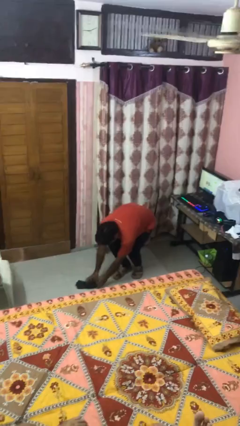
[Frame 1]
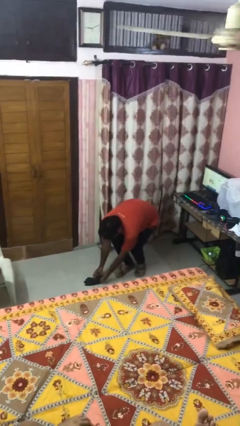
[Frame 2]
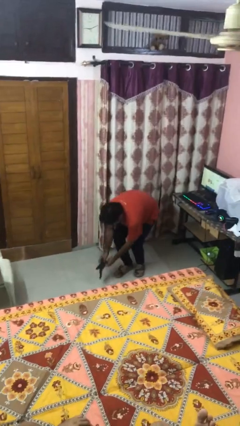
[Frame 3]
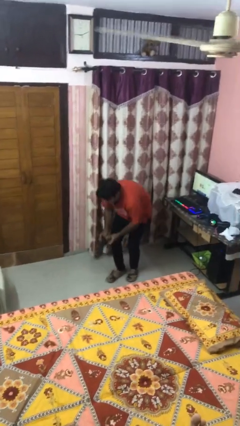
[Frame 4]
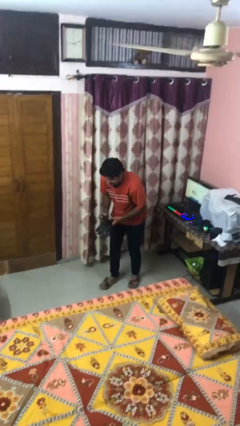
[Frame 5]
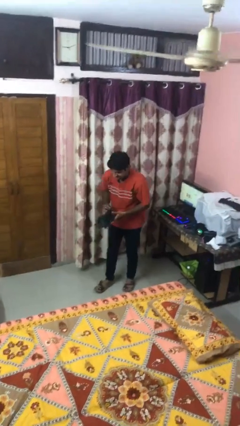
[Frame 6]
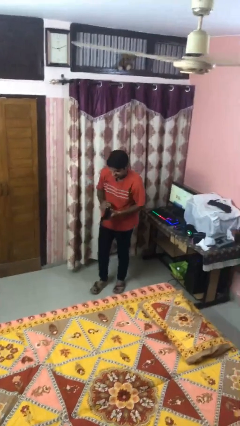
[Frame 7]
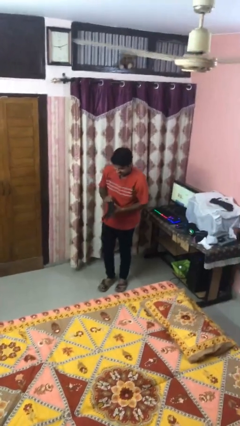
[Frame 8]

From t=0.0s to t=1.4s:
person picks up object from floor

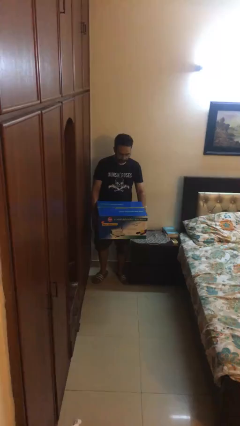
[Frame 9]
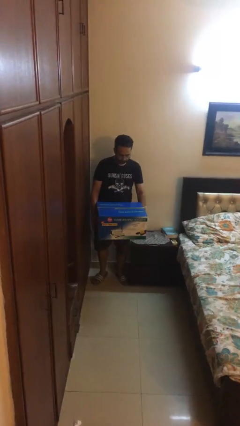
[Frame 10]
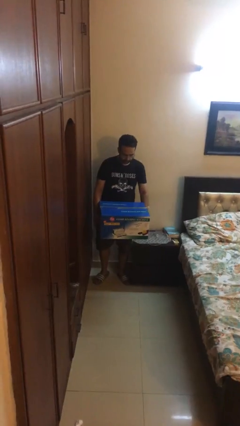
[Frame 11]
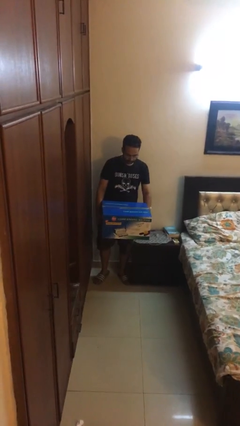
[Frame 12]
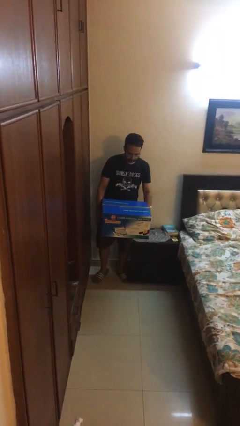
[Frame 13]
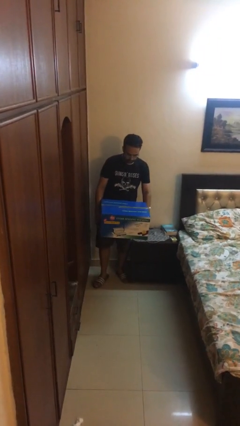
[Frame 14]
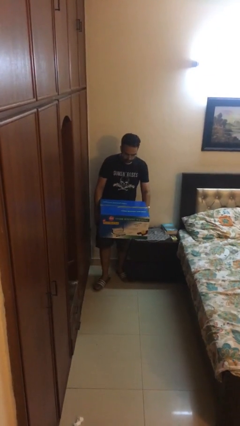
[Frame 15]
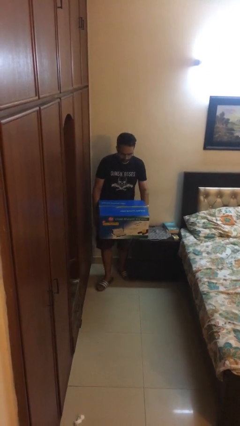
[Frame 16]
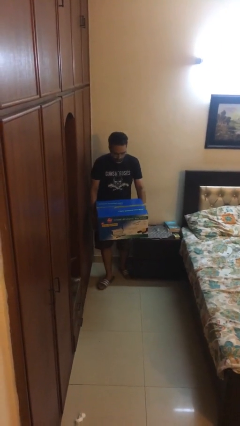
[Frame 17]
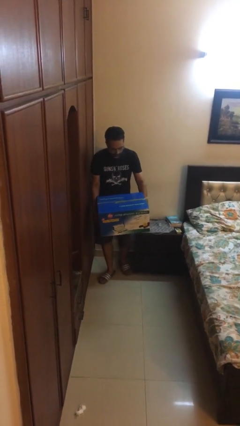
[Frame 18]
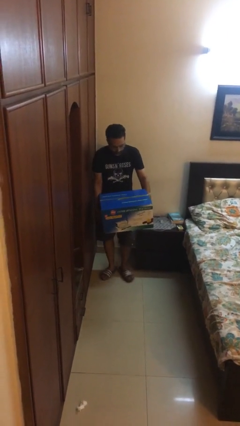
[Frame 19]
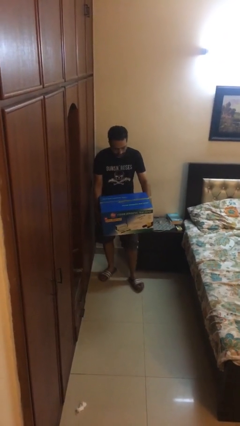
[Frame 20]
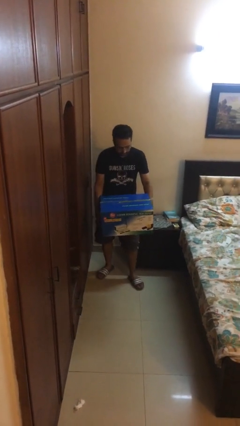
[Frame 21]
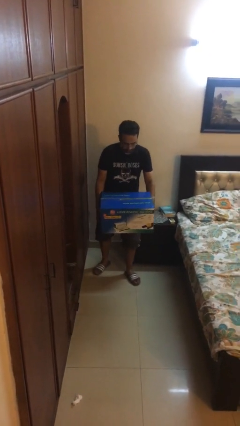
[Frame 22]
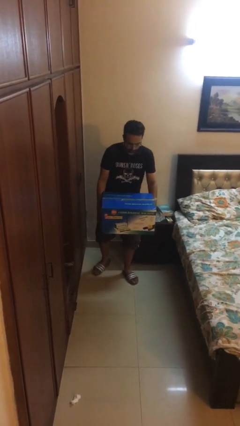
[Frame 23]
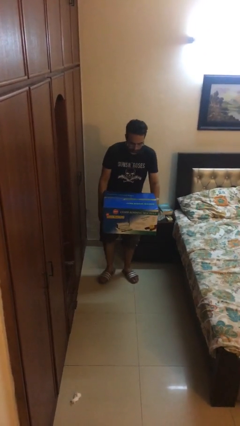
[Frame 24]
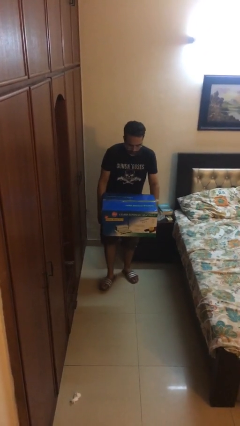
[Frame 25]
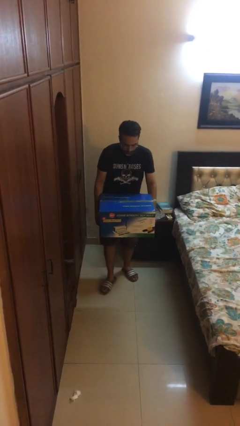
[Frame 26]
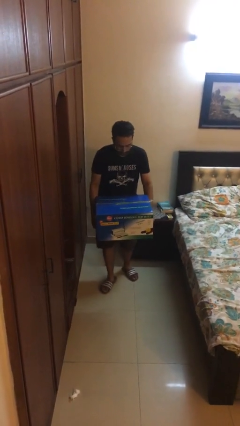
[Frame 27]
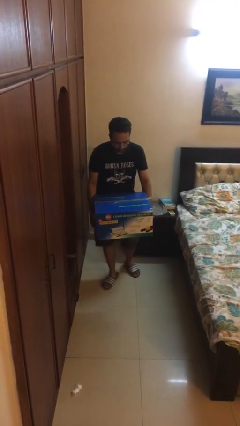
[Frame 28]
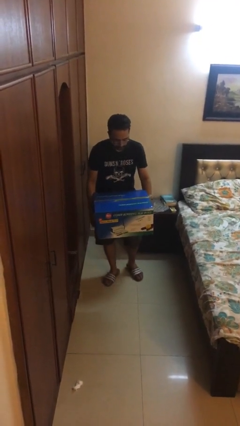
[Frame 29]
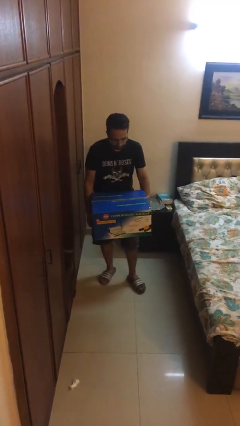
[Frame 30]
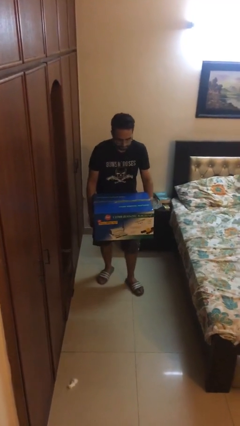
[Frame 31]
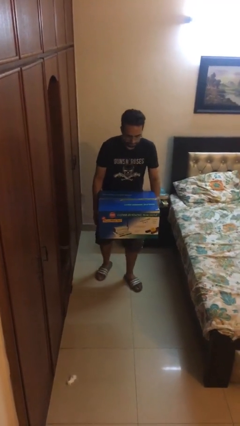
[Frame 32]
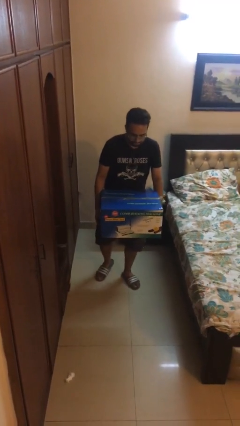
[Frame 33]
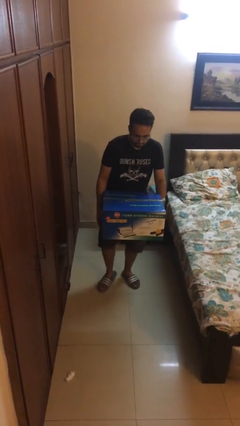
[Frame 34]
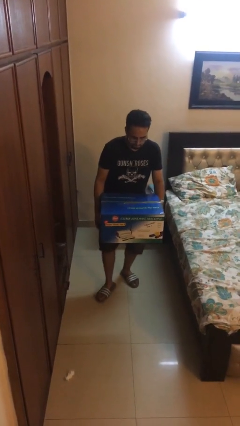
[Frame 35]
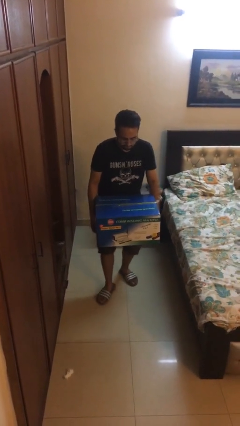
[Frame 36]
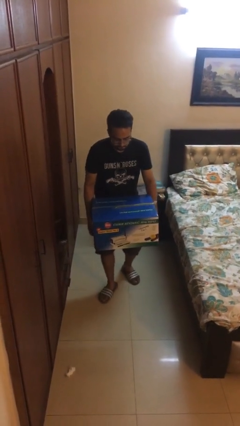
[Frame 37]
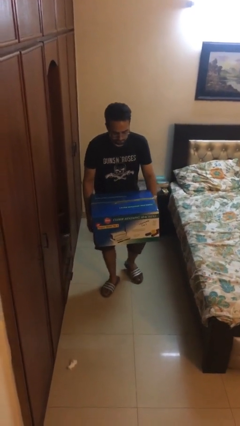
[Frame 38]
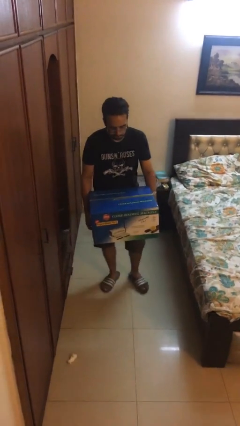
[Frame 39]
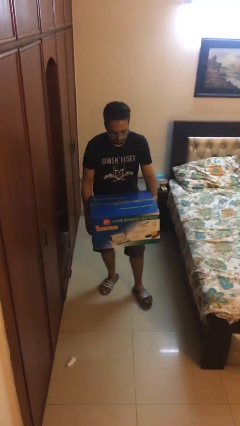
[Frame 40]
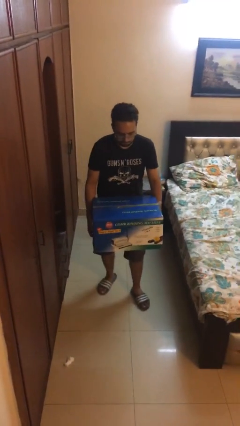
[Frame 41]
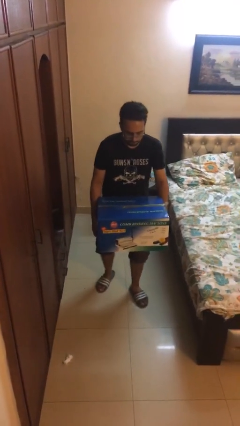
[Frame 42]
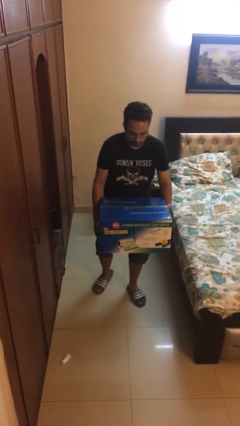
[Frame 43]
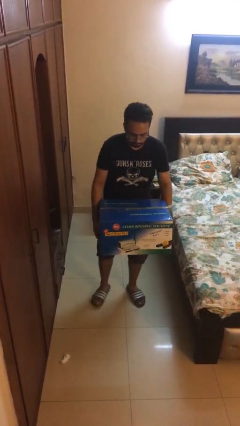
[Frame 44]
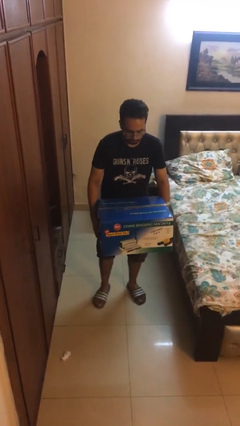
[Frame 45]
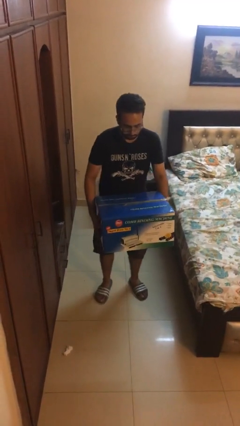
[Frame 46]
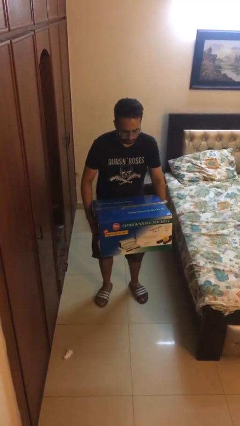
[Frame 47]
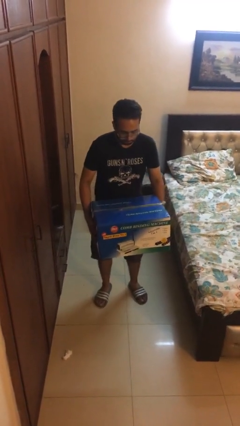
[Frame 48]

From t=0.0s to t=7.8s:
person carries heavy object

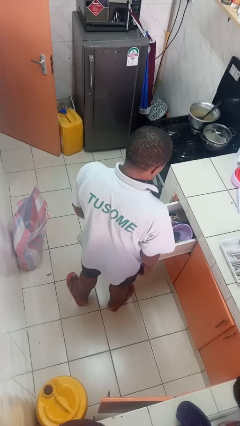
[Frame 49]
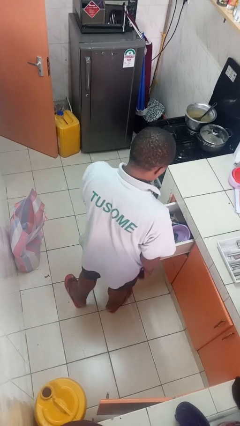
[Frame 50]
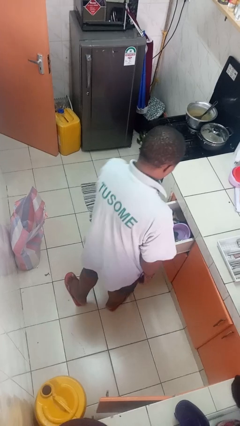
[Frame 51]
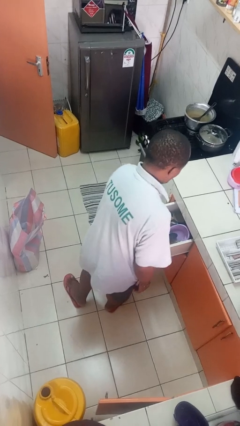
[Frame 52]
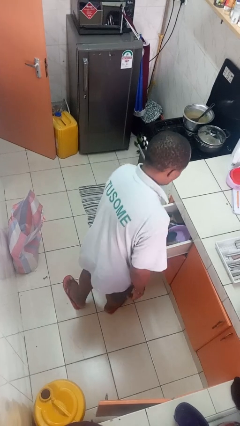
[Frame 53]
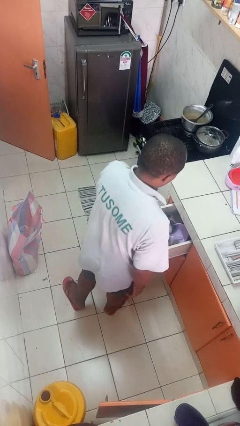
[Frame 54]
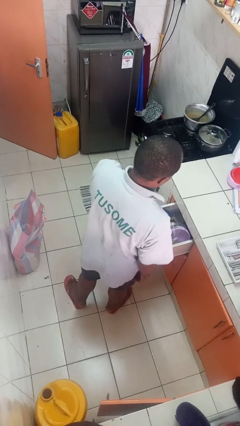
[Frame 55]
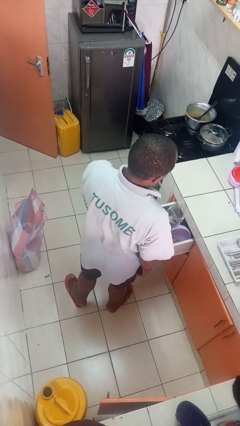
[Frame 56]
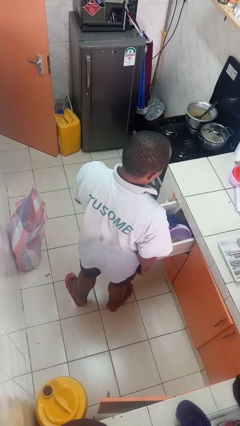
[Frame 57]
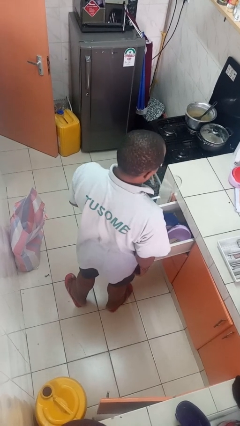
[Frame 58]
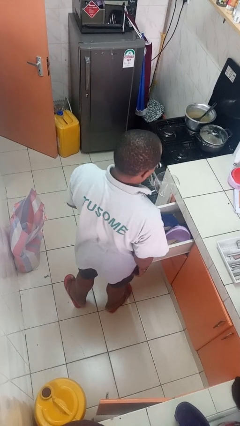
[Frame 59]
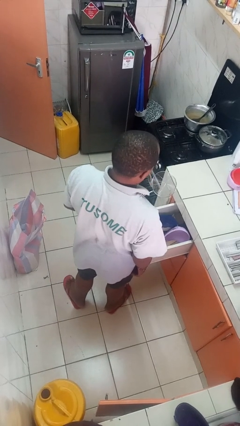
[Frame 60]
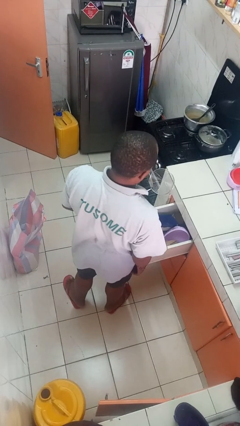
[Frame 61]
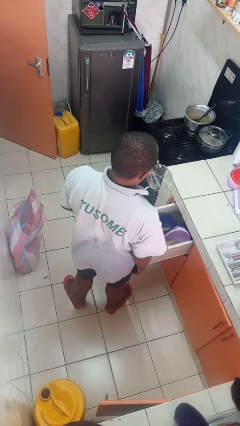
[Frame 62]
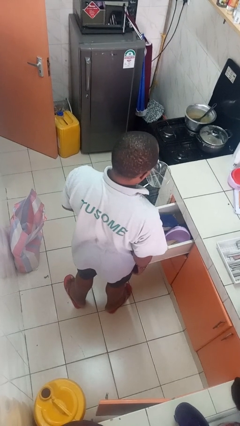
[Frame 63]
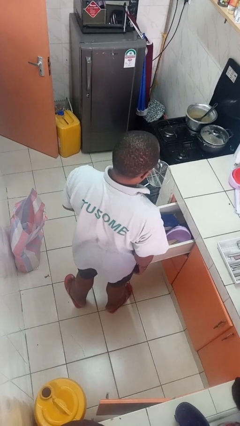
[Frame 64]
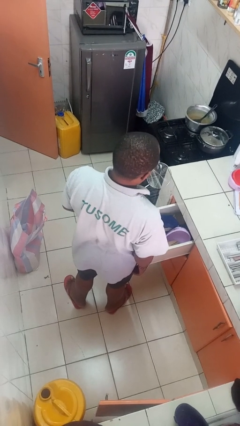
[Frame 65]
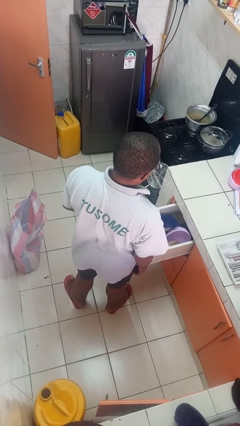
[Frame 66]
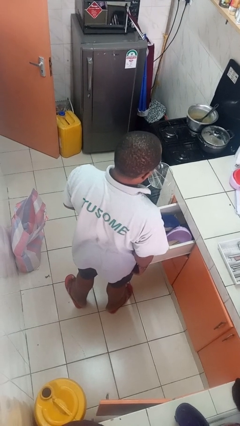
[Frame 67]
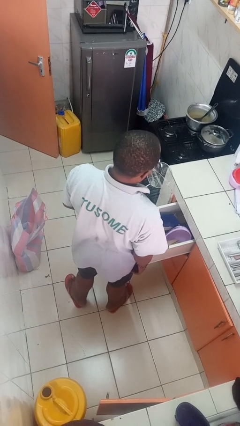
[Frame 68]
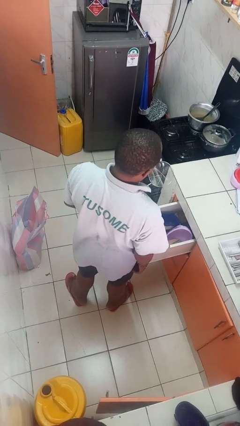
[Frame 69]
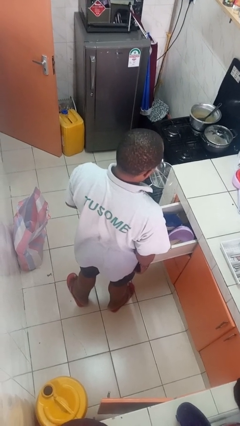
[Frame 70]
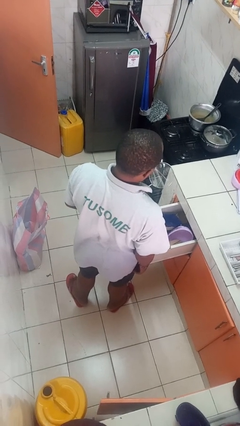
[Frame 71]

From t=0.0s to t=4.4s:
person takes object from kitchen drawer

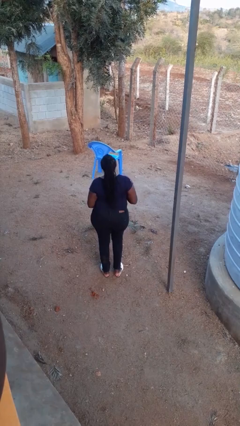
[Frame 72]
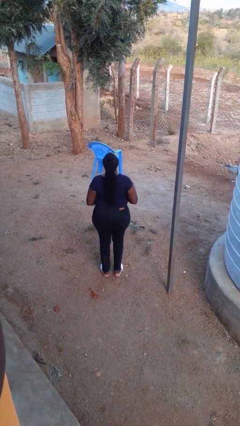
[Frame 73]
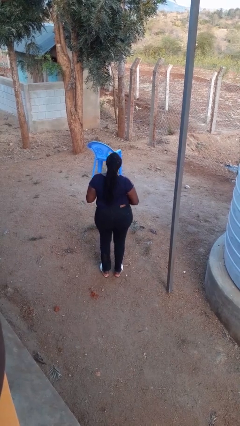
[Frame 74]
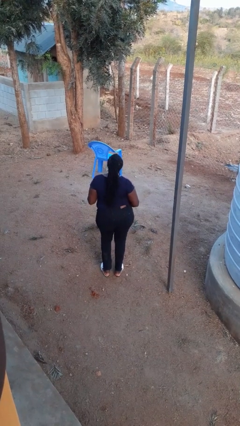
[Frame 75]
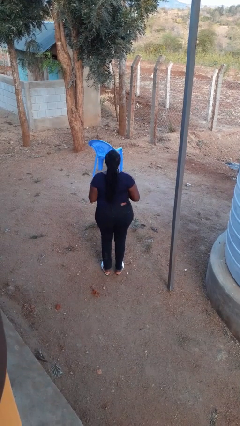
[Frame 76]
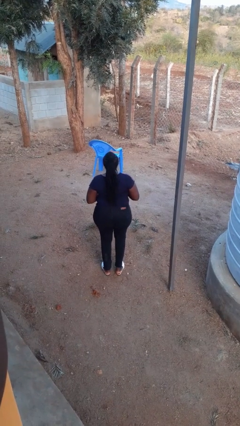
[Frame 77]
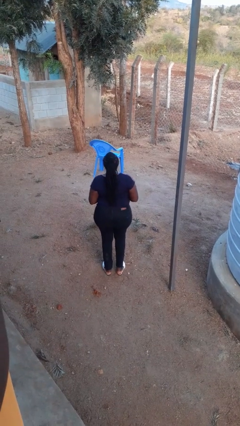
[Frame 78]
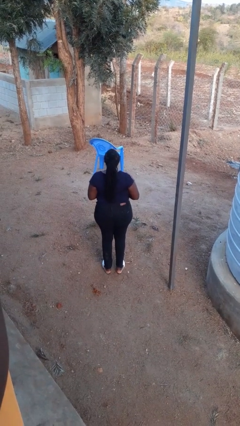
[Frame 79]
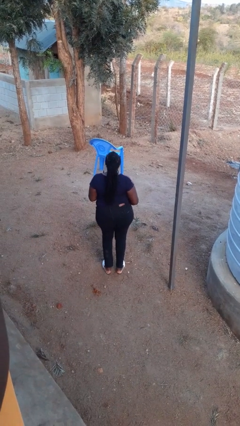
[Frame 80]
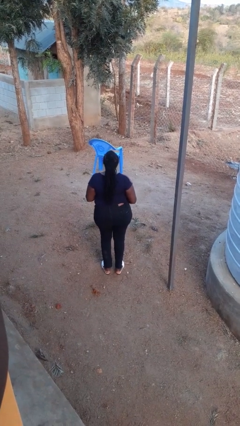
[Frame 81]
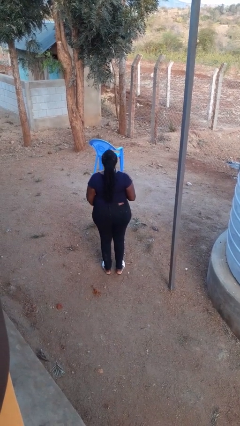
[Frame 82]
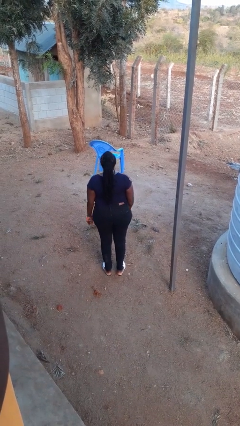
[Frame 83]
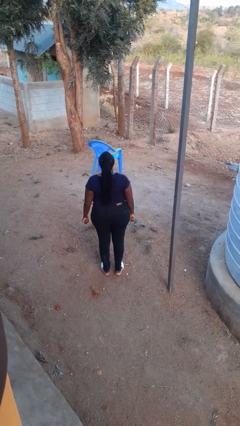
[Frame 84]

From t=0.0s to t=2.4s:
person wiggles hips

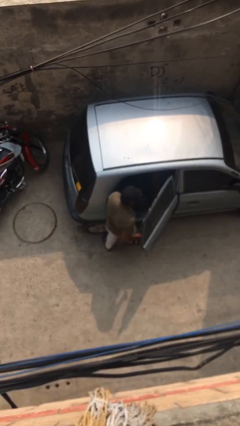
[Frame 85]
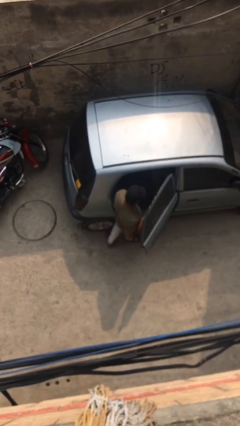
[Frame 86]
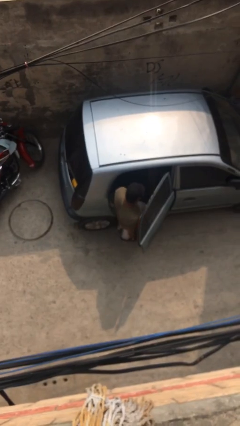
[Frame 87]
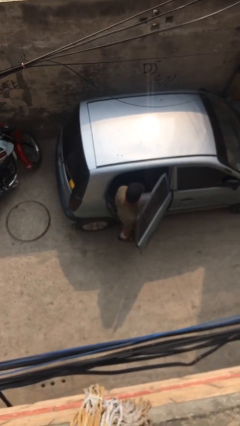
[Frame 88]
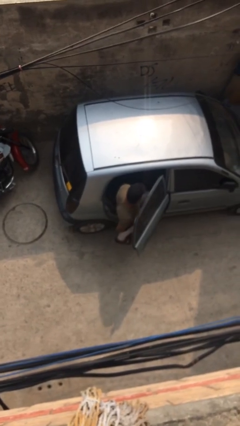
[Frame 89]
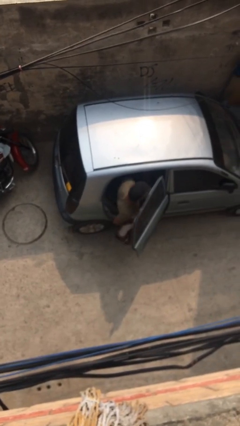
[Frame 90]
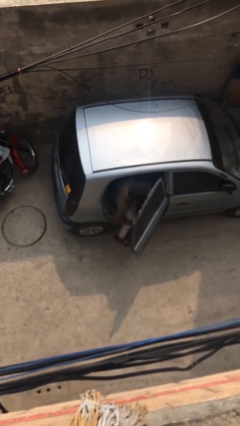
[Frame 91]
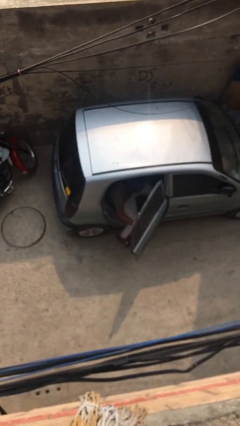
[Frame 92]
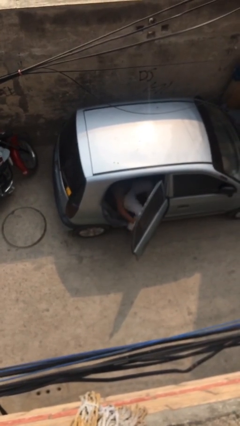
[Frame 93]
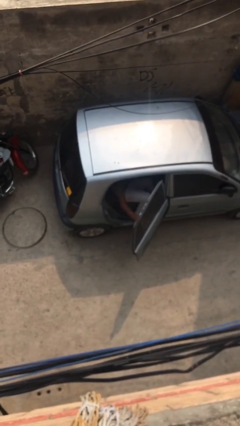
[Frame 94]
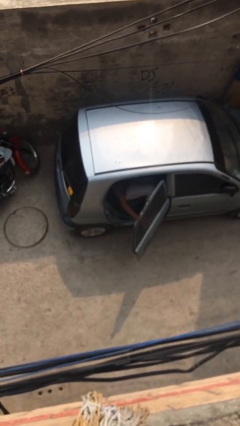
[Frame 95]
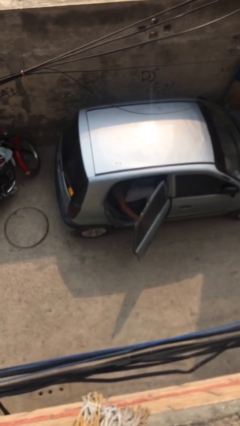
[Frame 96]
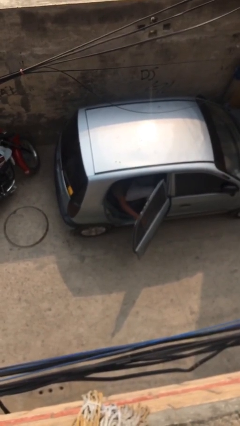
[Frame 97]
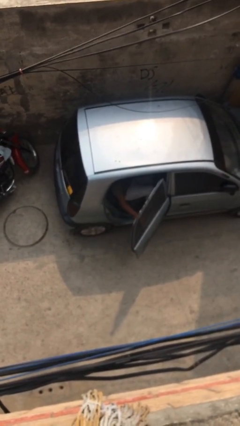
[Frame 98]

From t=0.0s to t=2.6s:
person enters car
